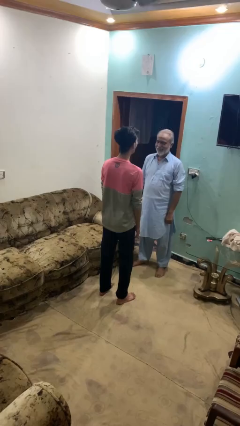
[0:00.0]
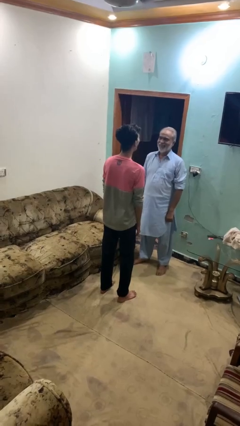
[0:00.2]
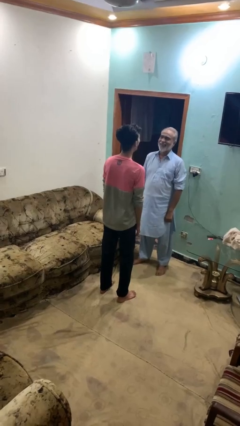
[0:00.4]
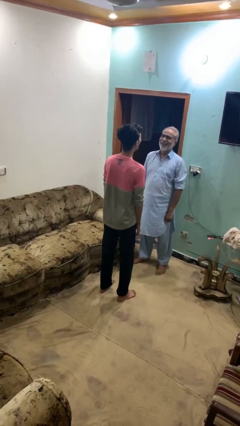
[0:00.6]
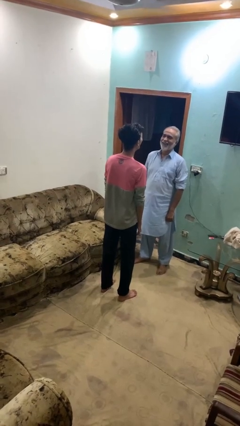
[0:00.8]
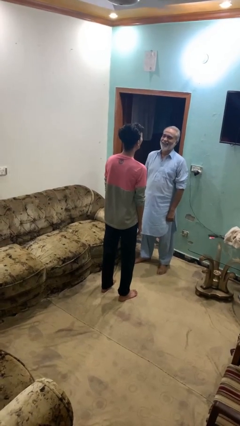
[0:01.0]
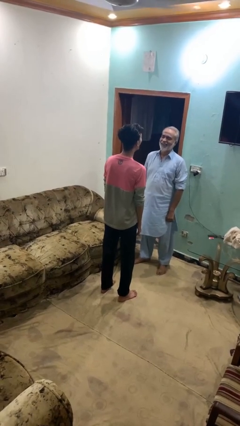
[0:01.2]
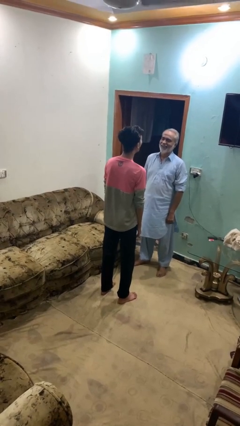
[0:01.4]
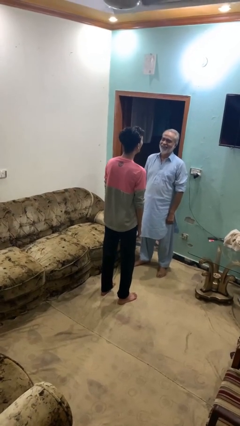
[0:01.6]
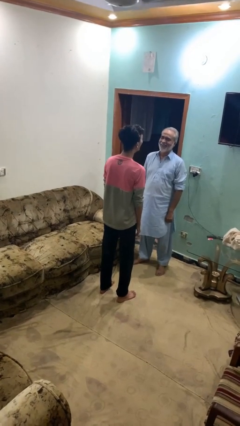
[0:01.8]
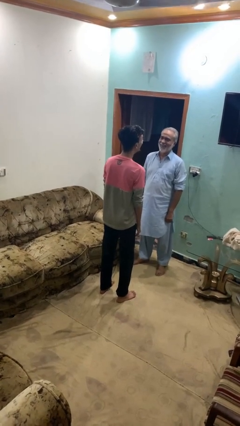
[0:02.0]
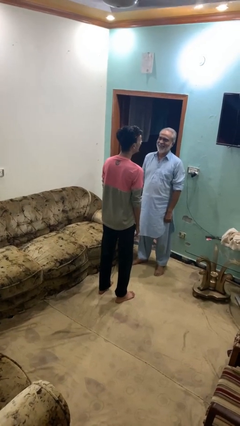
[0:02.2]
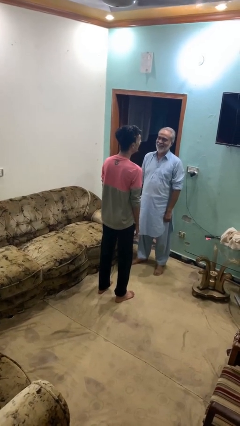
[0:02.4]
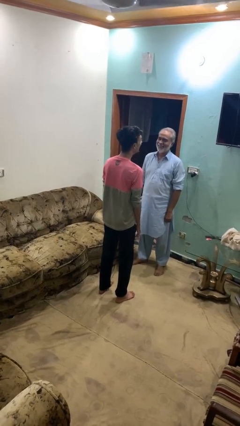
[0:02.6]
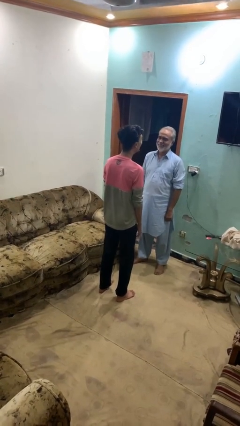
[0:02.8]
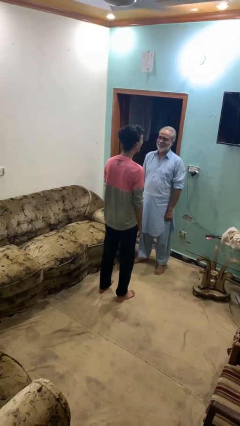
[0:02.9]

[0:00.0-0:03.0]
person laughs with person

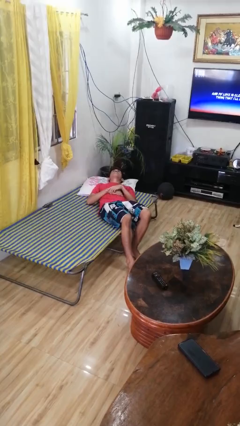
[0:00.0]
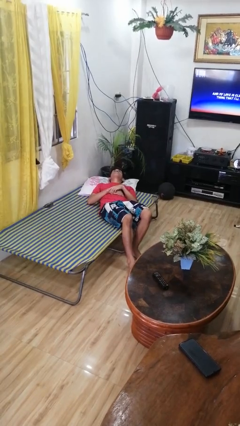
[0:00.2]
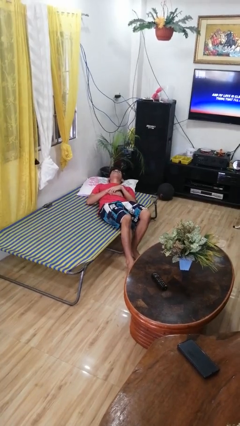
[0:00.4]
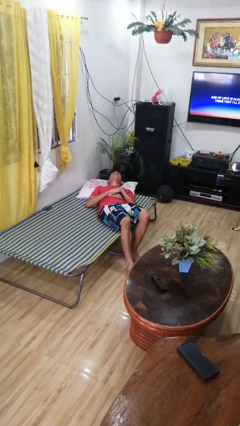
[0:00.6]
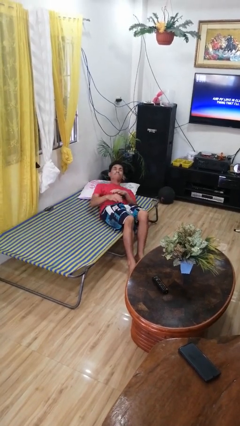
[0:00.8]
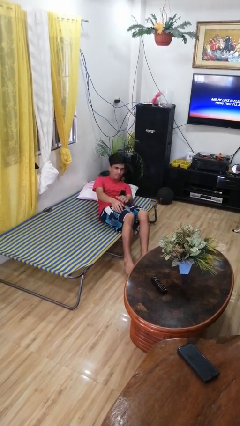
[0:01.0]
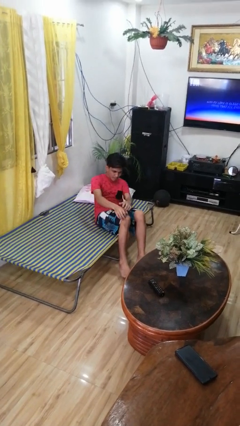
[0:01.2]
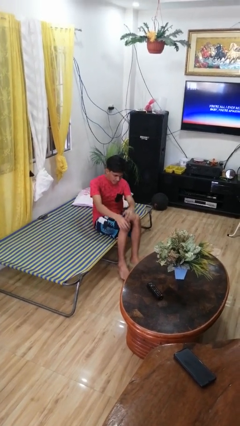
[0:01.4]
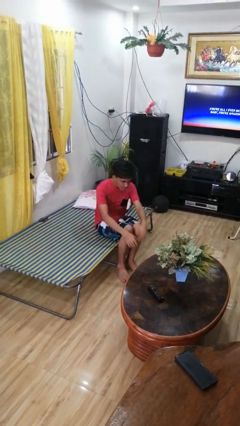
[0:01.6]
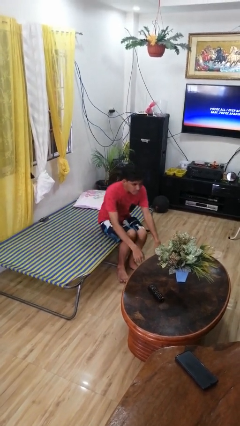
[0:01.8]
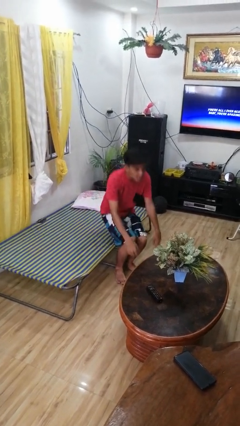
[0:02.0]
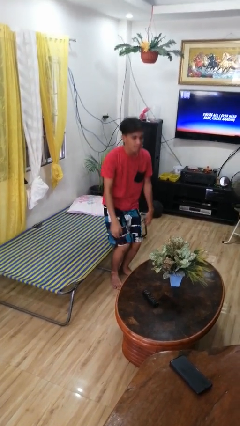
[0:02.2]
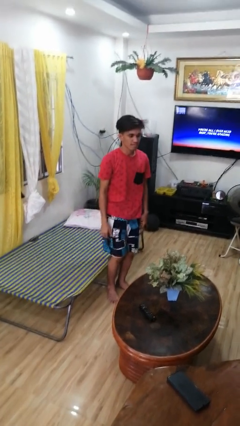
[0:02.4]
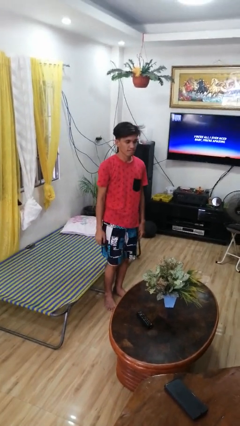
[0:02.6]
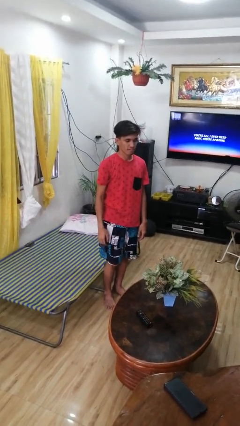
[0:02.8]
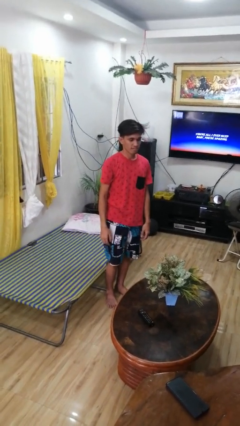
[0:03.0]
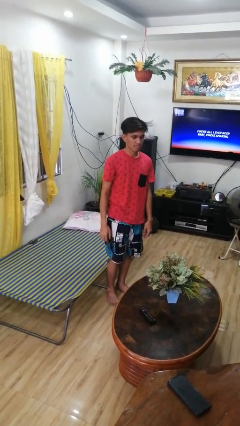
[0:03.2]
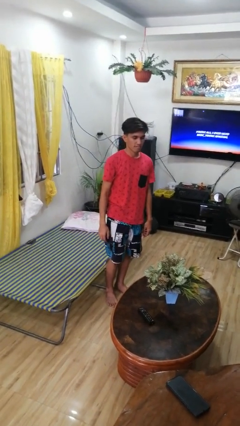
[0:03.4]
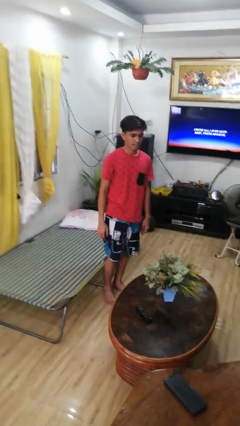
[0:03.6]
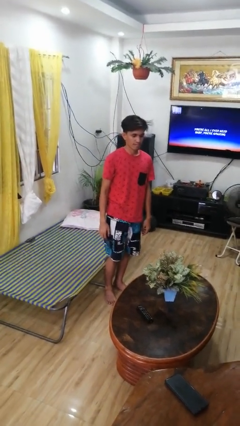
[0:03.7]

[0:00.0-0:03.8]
person stands up

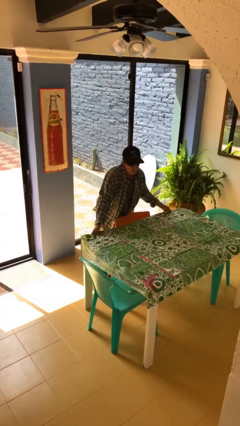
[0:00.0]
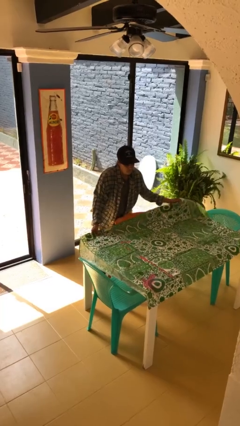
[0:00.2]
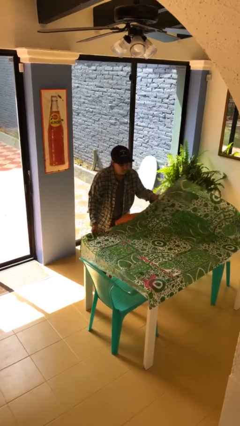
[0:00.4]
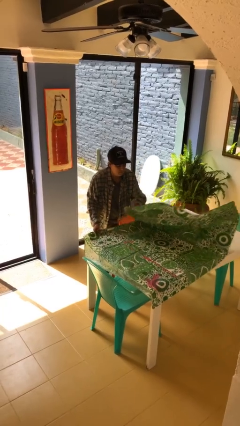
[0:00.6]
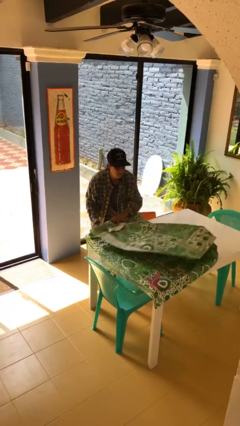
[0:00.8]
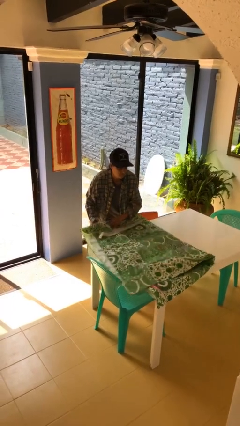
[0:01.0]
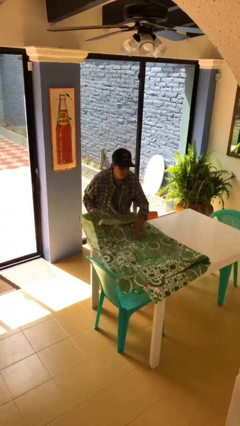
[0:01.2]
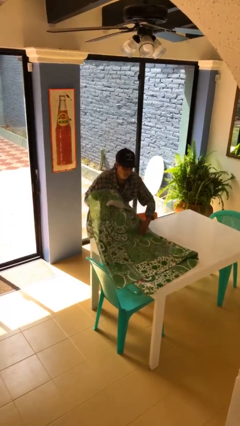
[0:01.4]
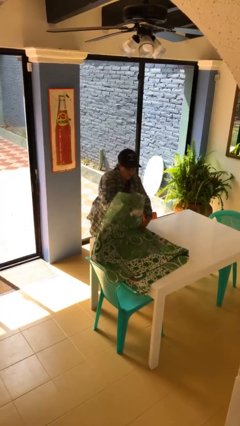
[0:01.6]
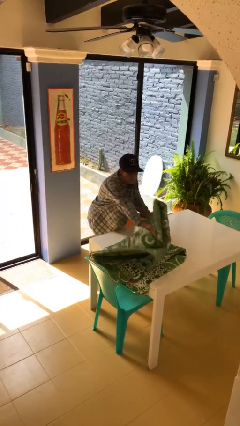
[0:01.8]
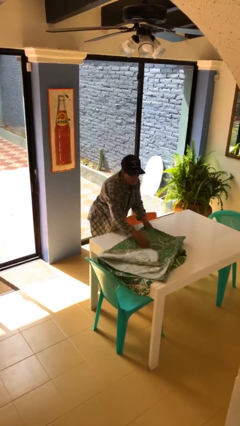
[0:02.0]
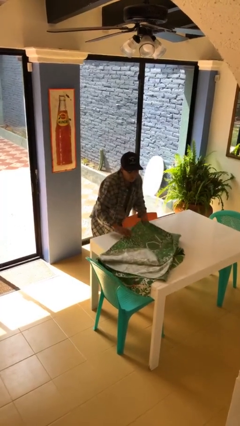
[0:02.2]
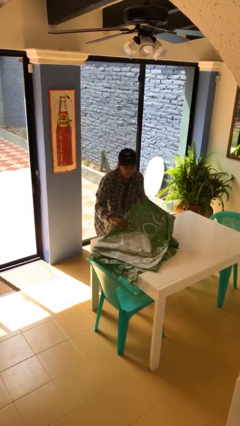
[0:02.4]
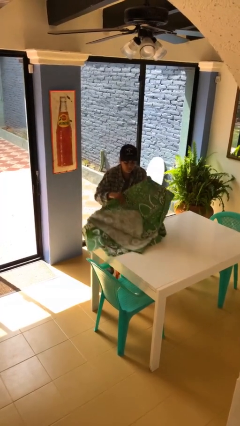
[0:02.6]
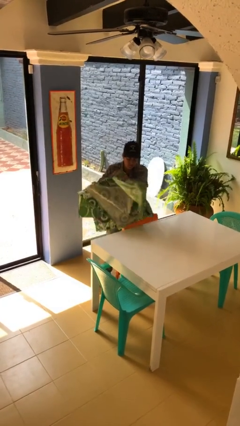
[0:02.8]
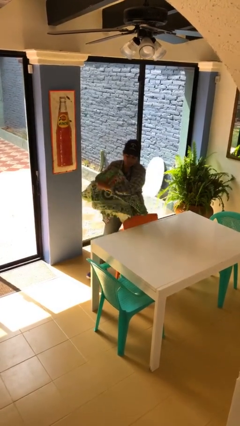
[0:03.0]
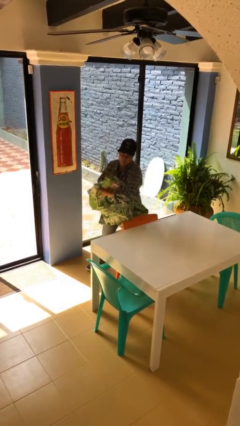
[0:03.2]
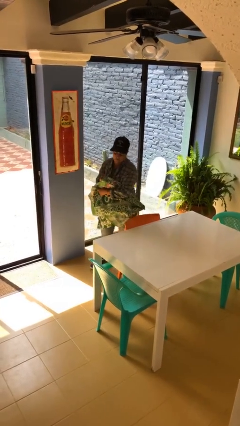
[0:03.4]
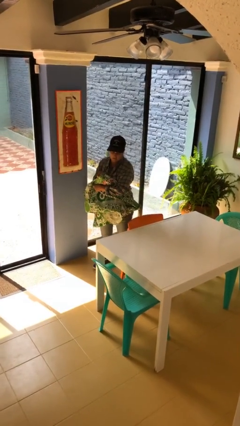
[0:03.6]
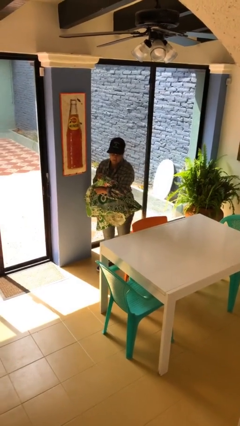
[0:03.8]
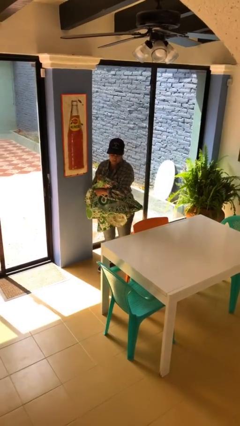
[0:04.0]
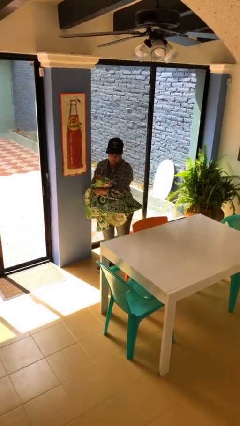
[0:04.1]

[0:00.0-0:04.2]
person folds tablecloth

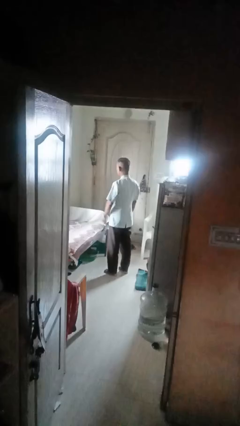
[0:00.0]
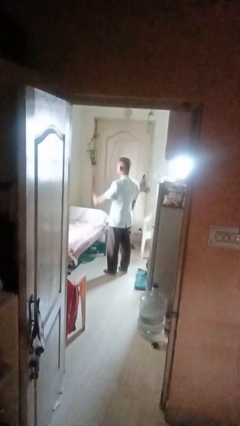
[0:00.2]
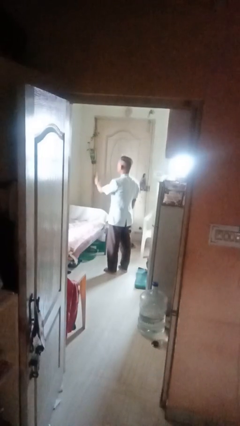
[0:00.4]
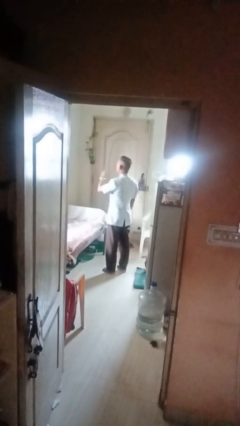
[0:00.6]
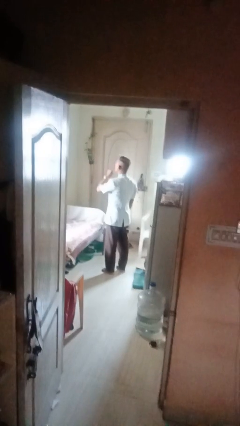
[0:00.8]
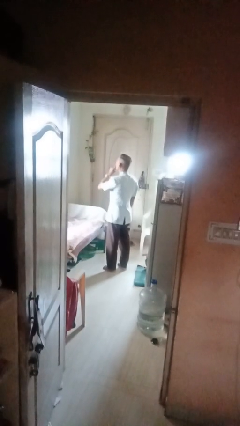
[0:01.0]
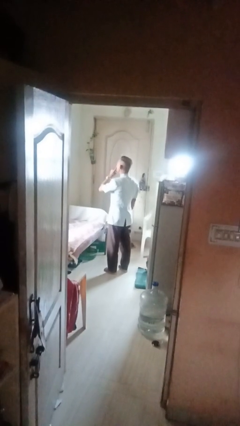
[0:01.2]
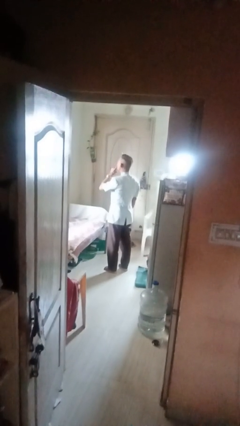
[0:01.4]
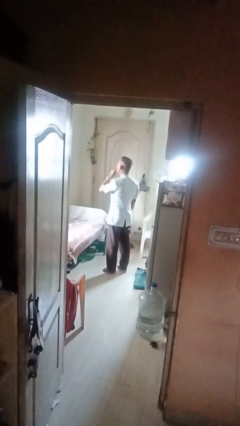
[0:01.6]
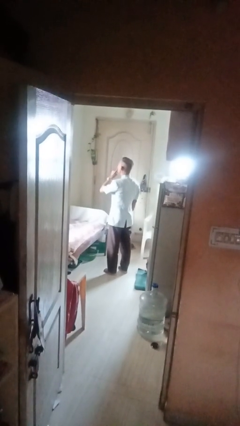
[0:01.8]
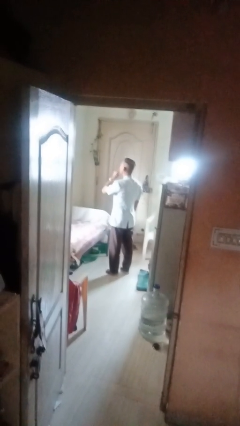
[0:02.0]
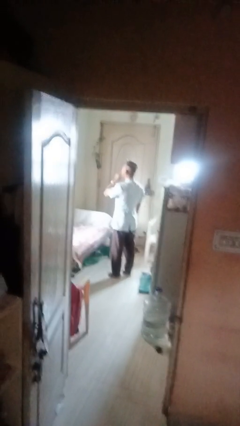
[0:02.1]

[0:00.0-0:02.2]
person gestures be quiet

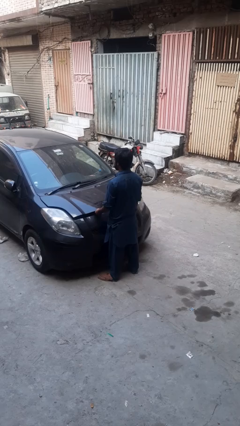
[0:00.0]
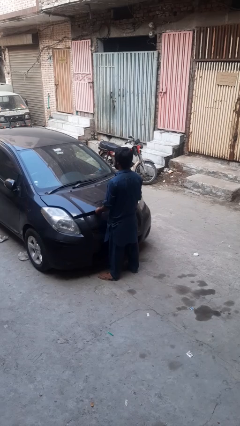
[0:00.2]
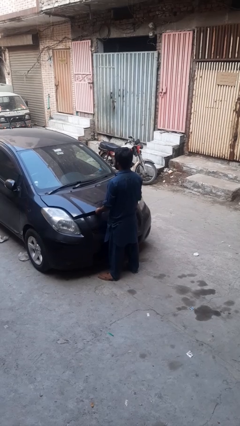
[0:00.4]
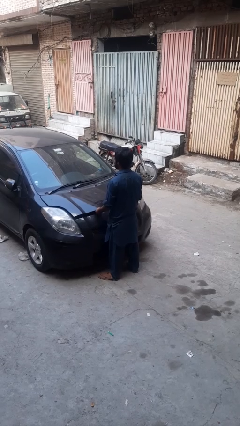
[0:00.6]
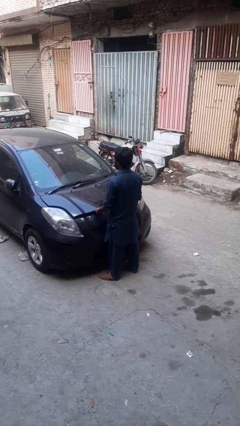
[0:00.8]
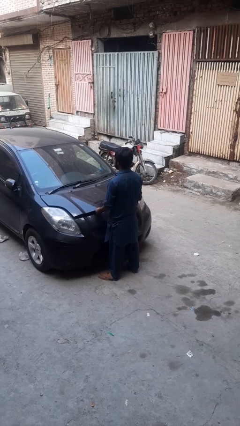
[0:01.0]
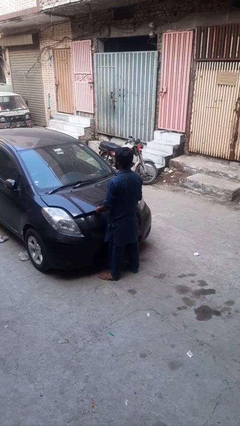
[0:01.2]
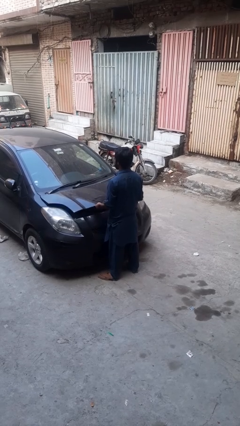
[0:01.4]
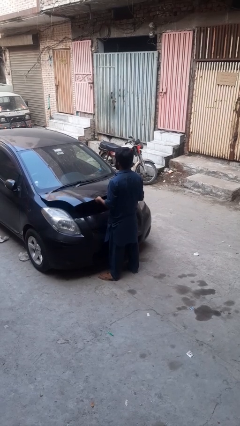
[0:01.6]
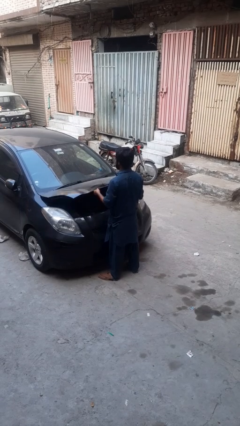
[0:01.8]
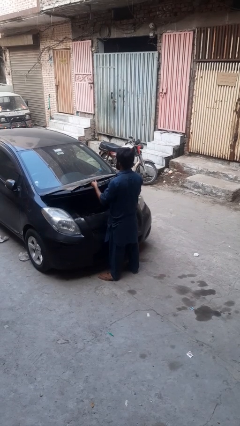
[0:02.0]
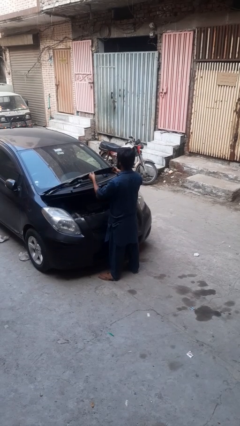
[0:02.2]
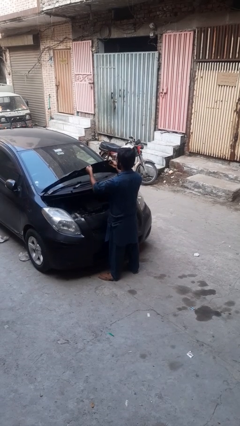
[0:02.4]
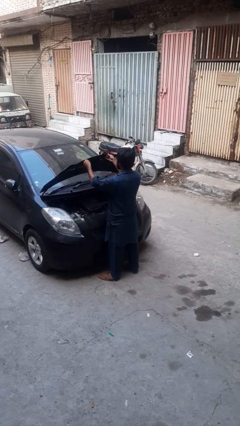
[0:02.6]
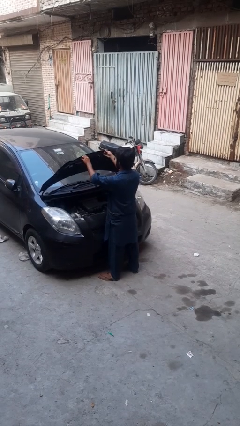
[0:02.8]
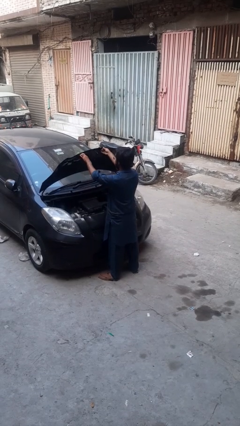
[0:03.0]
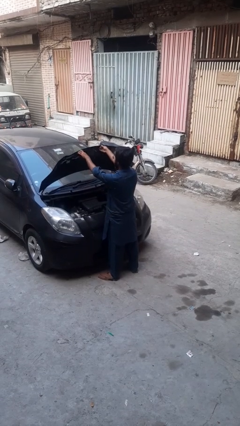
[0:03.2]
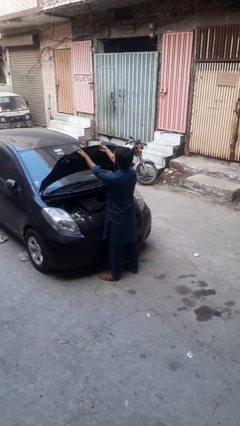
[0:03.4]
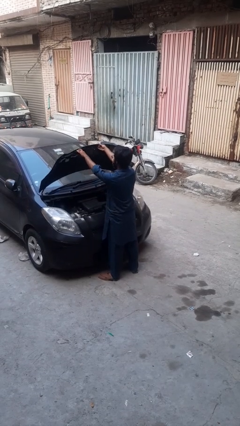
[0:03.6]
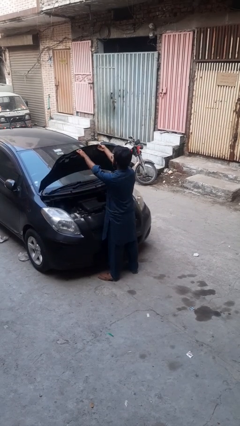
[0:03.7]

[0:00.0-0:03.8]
person opens car hood

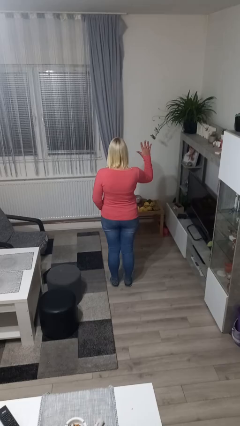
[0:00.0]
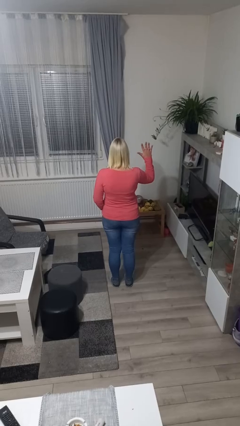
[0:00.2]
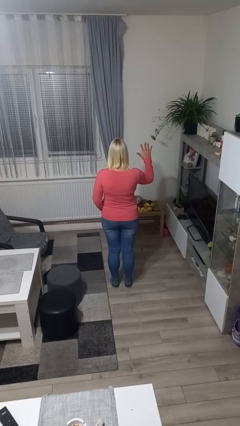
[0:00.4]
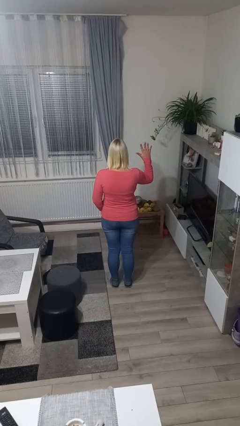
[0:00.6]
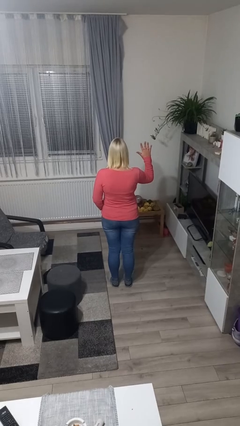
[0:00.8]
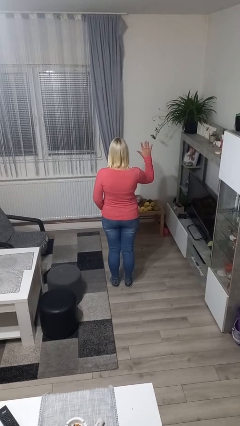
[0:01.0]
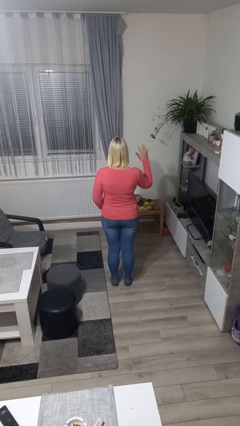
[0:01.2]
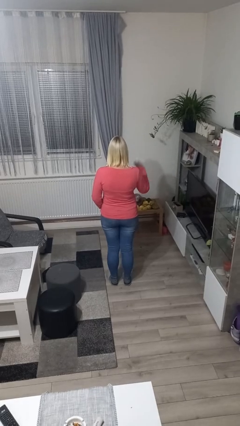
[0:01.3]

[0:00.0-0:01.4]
person gestures number five
